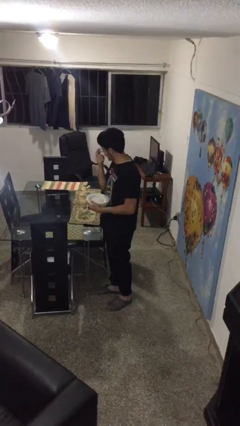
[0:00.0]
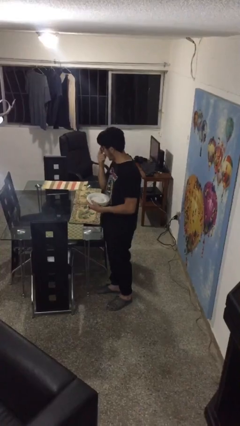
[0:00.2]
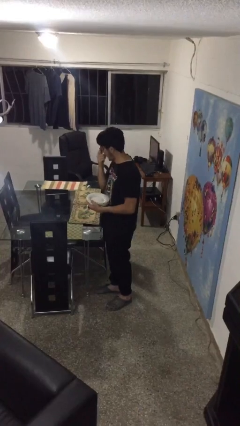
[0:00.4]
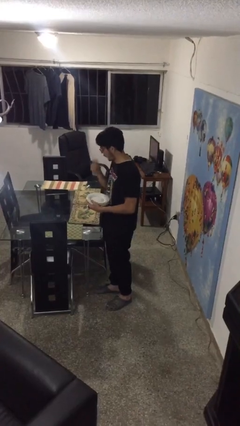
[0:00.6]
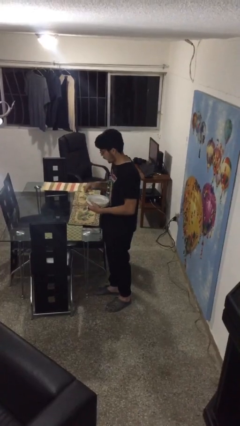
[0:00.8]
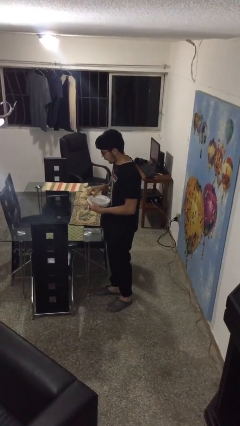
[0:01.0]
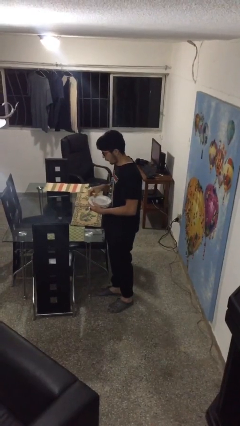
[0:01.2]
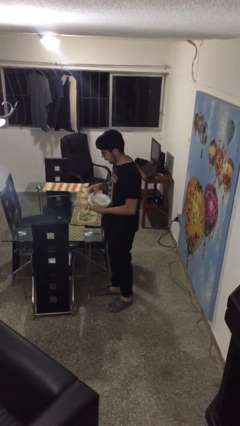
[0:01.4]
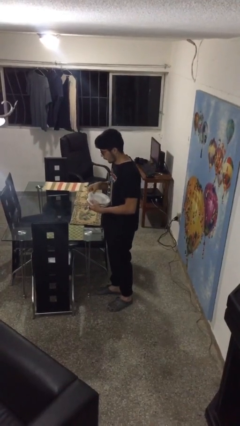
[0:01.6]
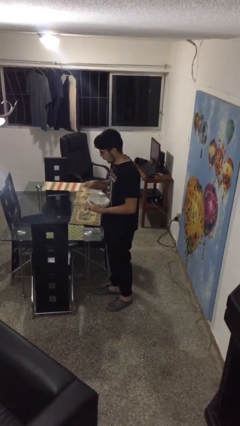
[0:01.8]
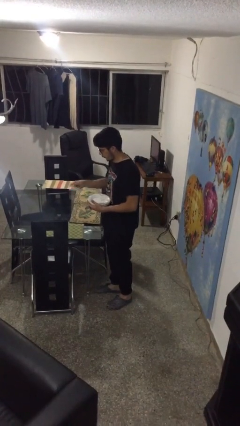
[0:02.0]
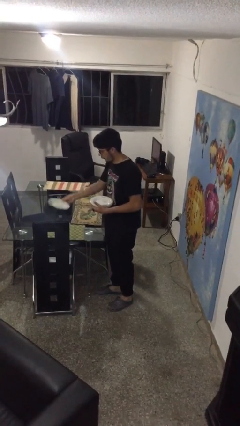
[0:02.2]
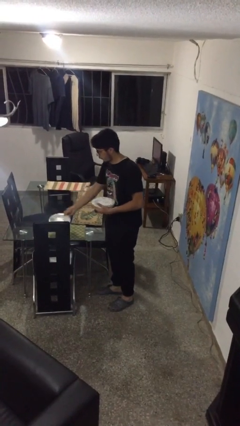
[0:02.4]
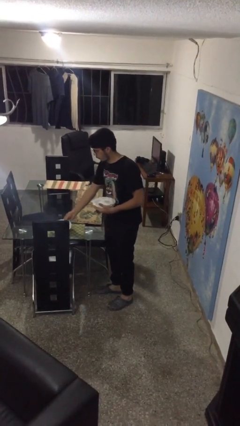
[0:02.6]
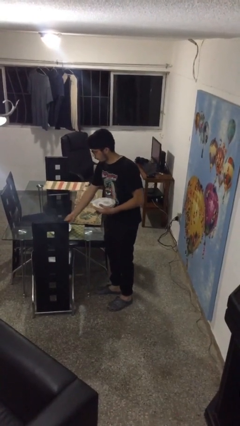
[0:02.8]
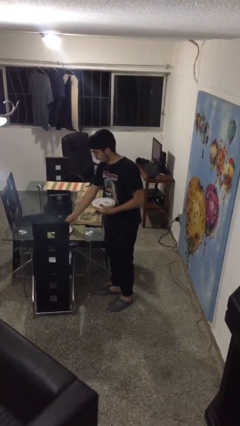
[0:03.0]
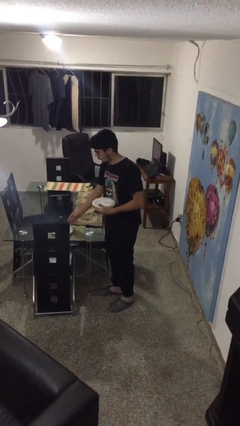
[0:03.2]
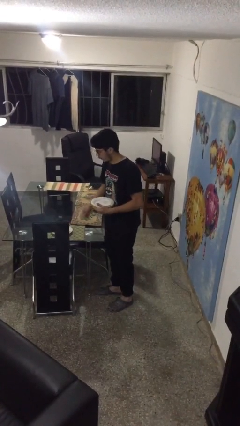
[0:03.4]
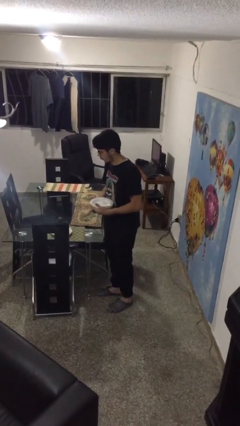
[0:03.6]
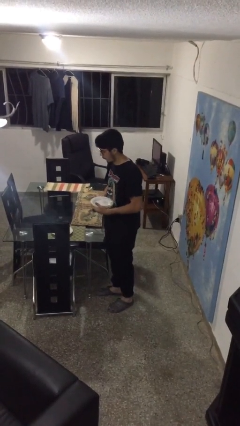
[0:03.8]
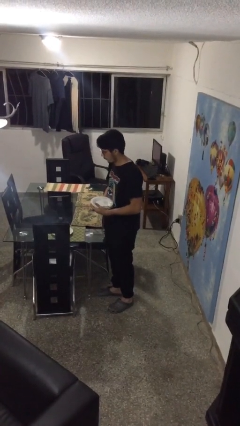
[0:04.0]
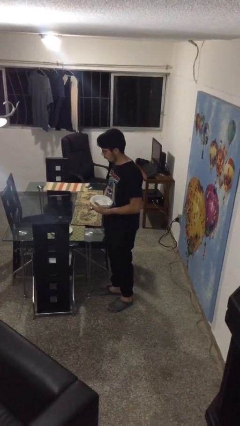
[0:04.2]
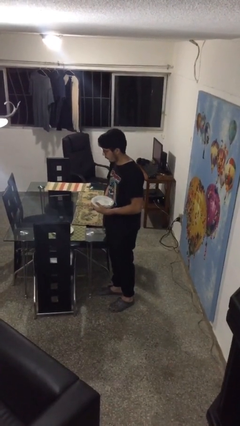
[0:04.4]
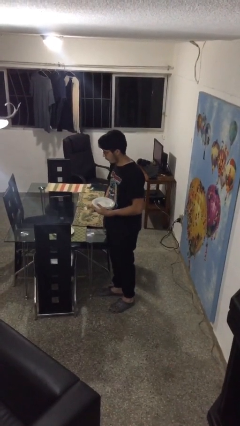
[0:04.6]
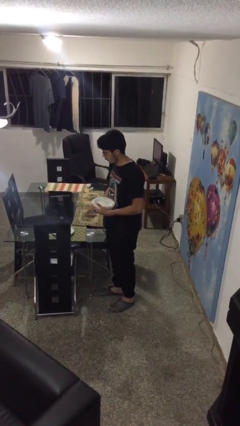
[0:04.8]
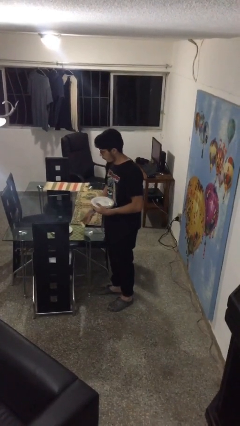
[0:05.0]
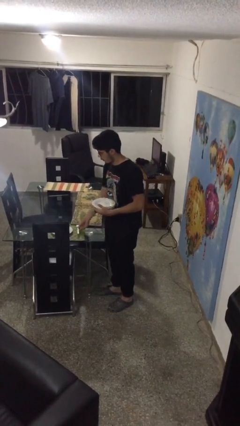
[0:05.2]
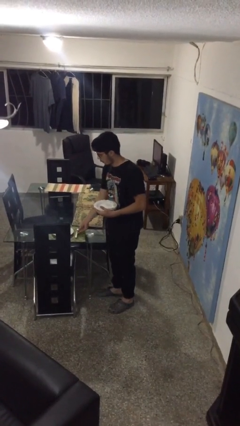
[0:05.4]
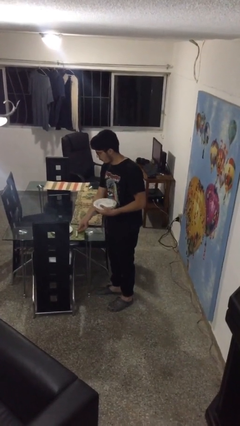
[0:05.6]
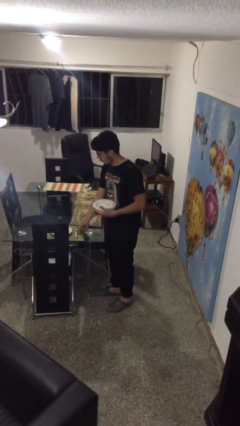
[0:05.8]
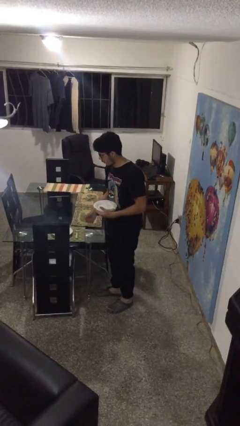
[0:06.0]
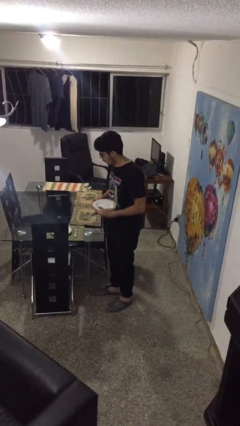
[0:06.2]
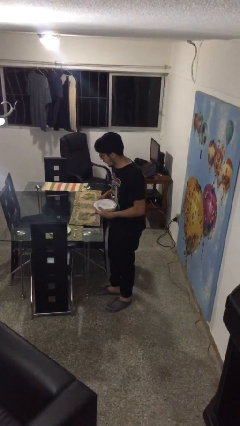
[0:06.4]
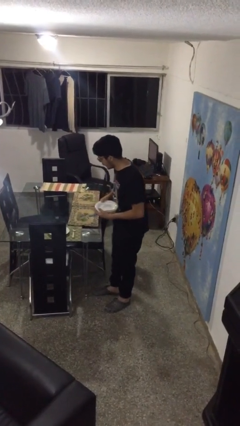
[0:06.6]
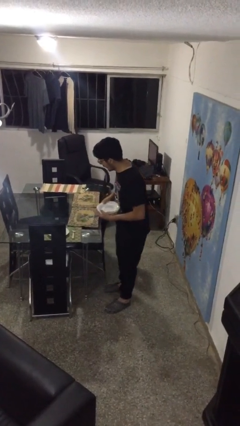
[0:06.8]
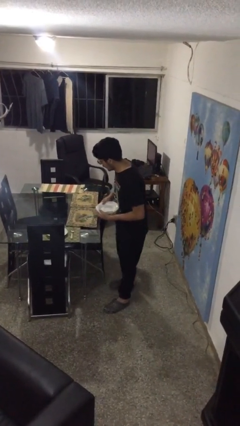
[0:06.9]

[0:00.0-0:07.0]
person sets table

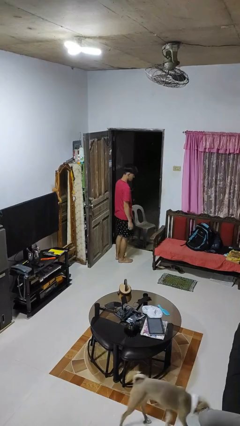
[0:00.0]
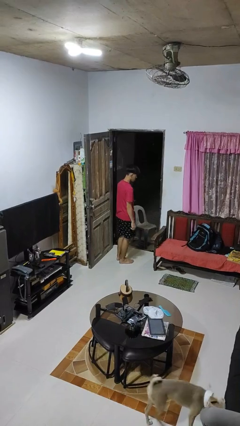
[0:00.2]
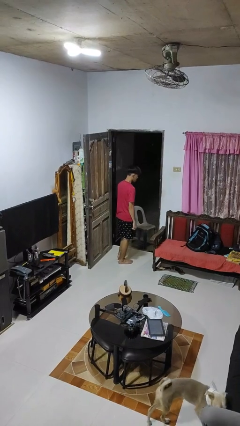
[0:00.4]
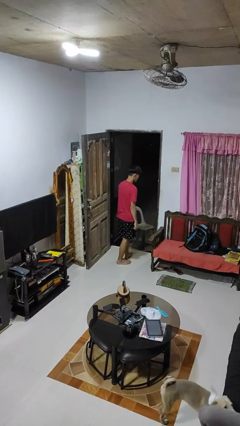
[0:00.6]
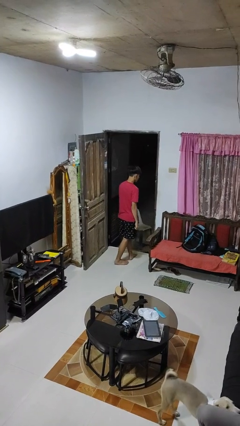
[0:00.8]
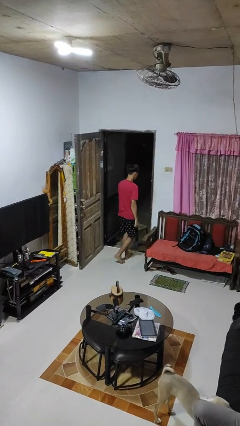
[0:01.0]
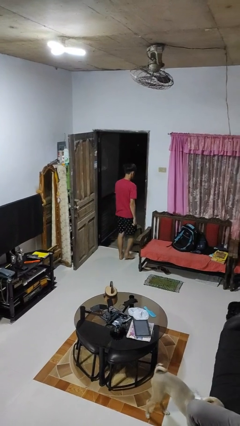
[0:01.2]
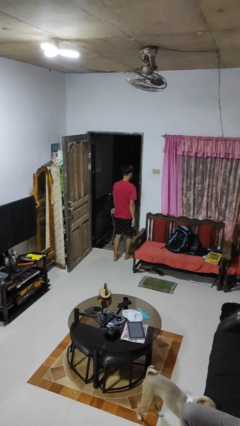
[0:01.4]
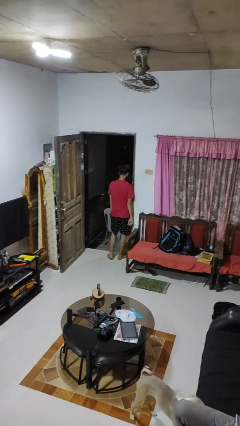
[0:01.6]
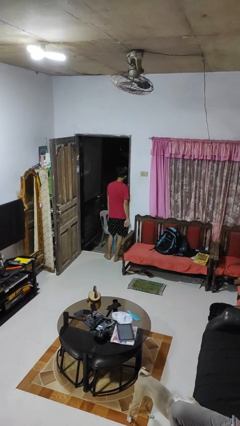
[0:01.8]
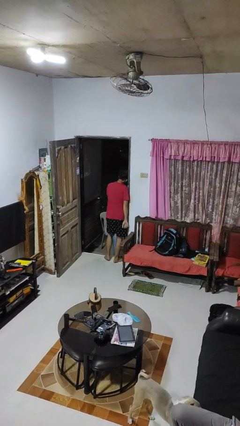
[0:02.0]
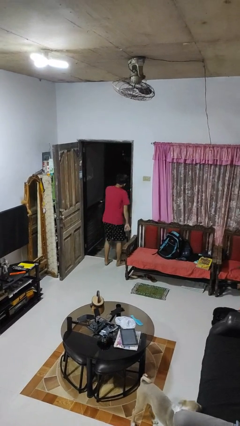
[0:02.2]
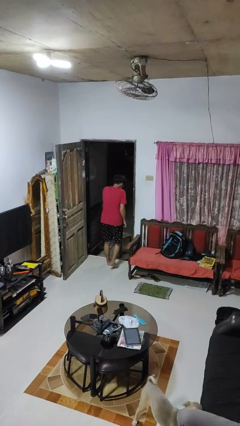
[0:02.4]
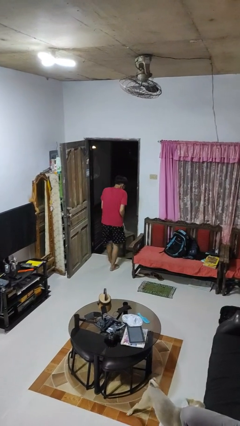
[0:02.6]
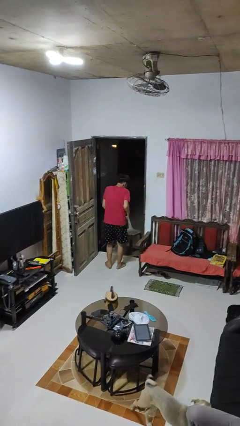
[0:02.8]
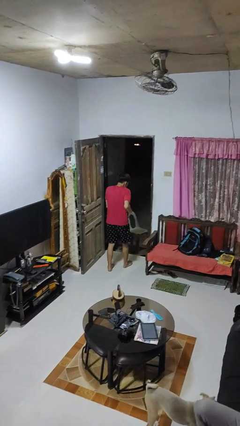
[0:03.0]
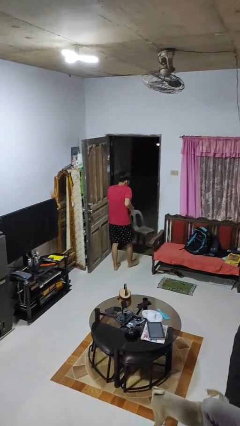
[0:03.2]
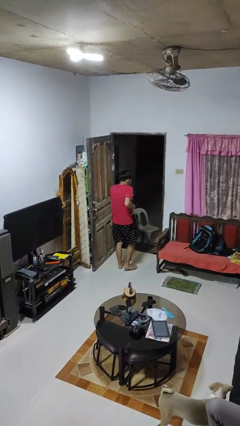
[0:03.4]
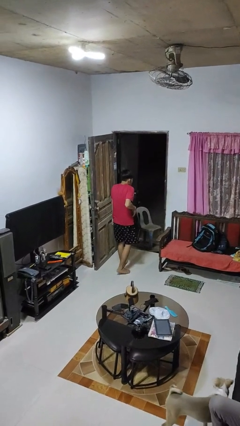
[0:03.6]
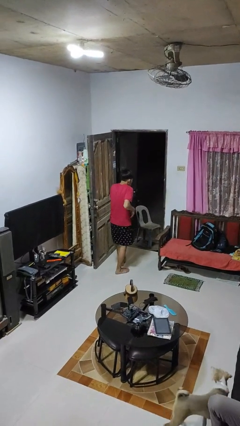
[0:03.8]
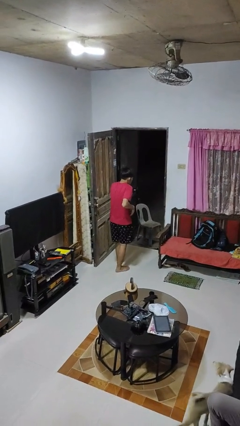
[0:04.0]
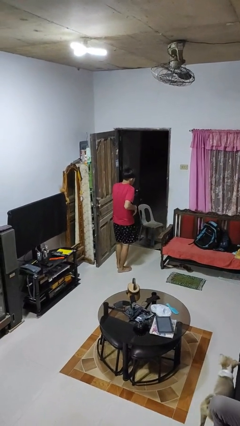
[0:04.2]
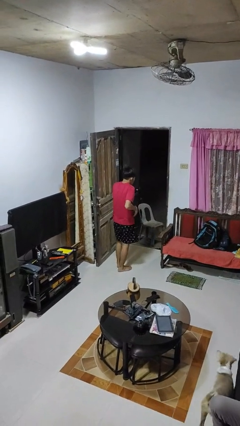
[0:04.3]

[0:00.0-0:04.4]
person bumps into wall

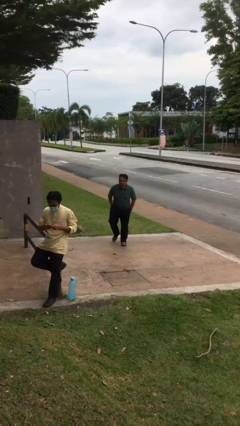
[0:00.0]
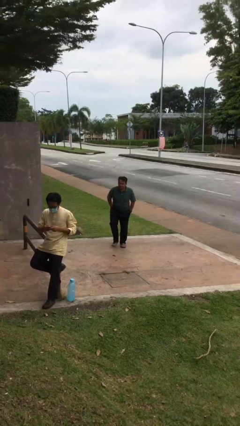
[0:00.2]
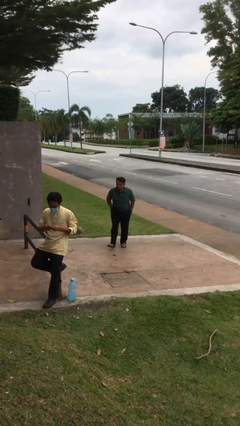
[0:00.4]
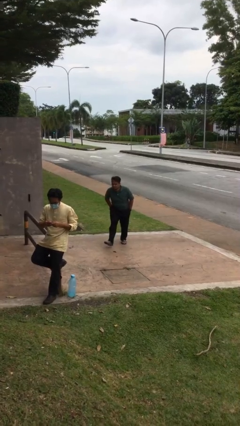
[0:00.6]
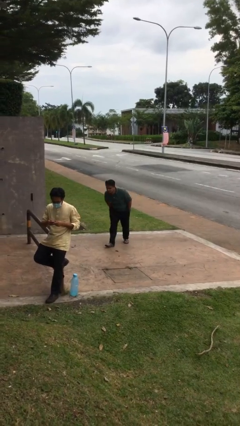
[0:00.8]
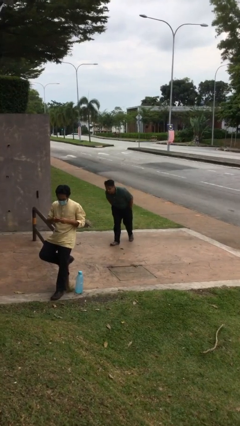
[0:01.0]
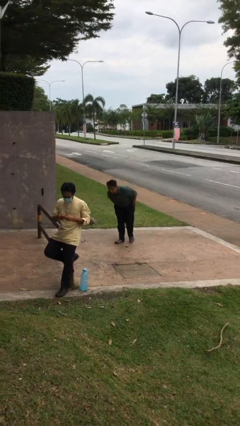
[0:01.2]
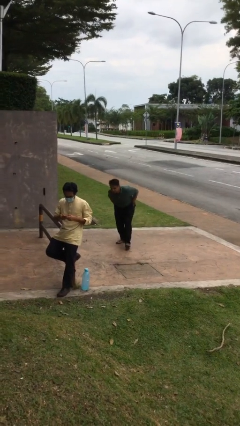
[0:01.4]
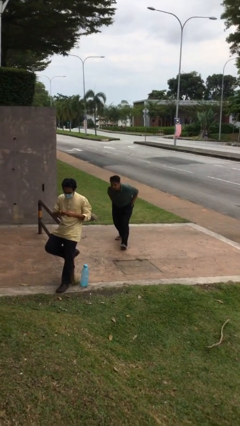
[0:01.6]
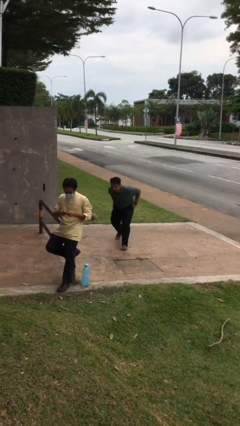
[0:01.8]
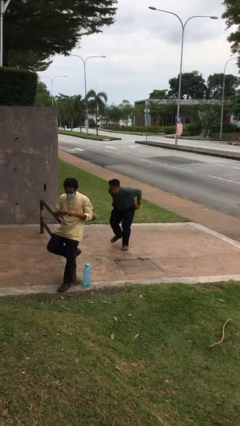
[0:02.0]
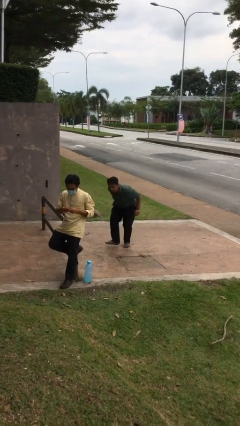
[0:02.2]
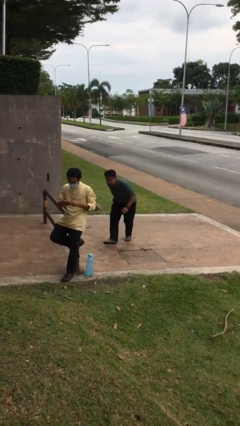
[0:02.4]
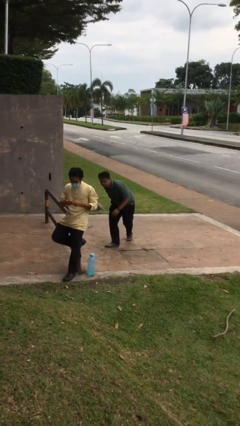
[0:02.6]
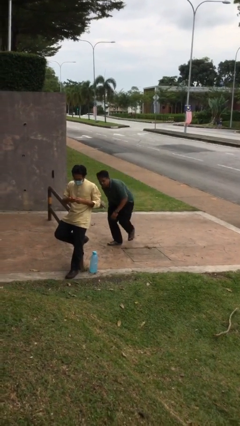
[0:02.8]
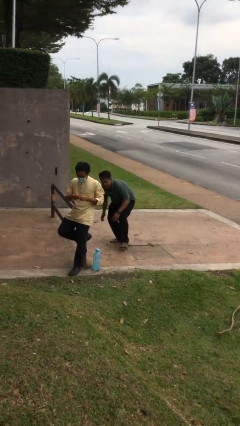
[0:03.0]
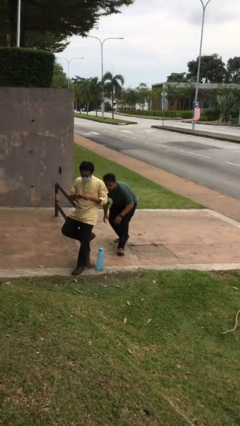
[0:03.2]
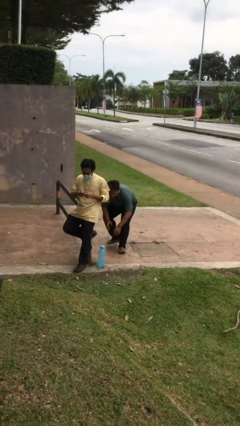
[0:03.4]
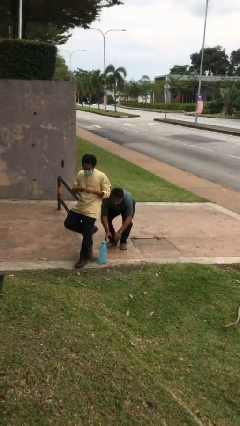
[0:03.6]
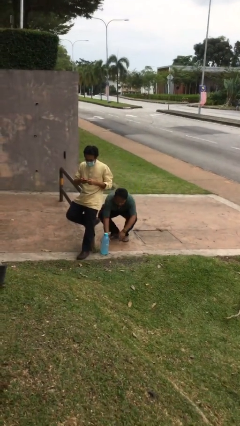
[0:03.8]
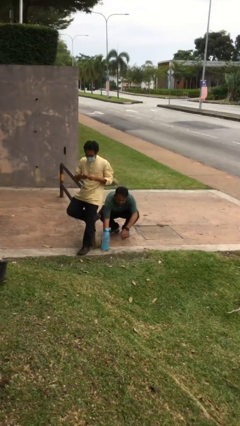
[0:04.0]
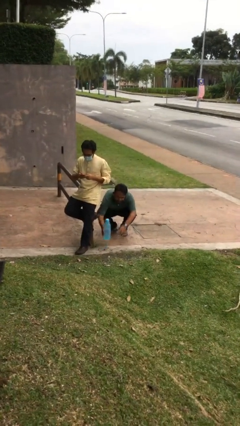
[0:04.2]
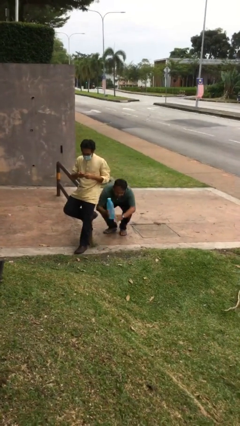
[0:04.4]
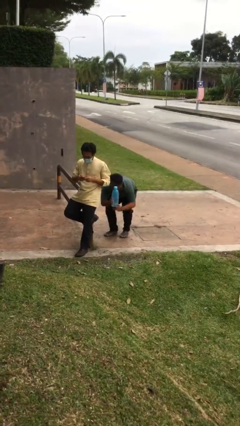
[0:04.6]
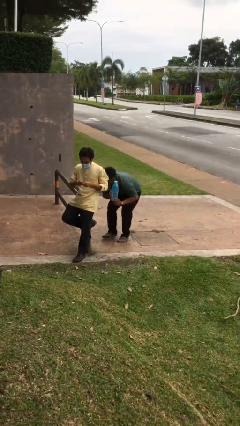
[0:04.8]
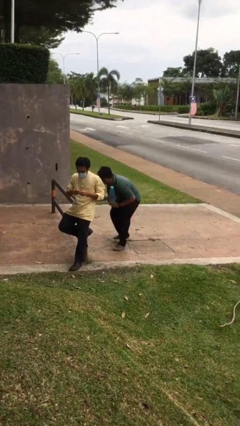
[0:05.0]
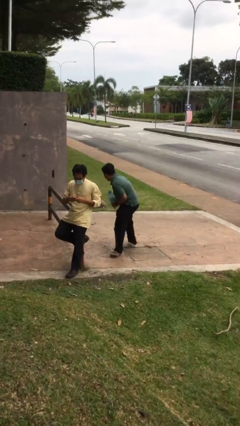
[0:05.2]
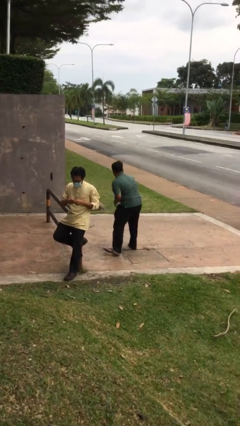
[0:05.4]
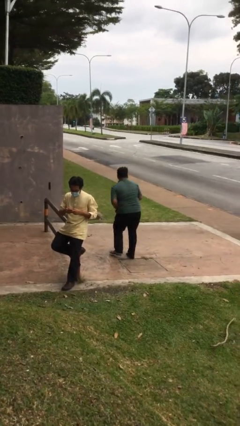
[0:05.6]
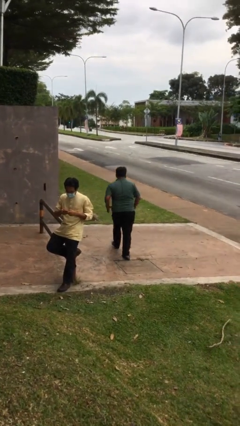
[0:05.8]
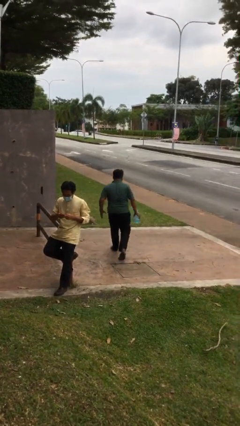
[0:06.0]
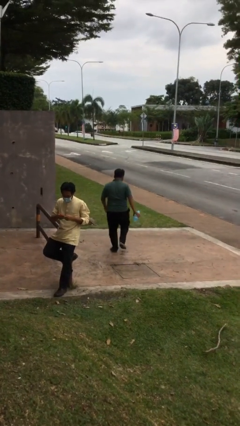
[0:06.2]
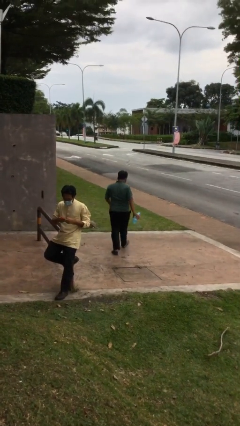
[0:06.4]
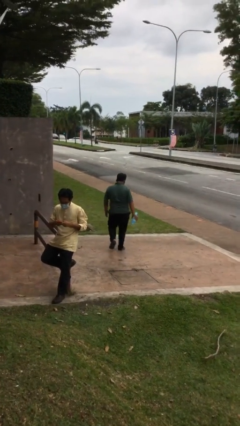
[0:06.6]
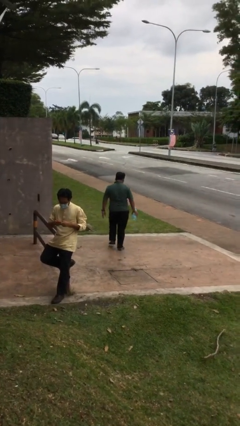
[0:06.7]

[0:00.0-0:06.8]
person steals object from person
